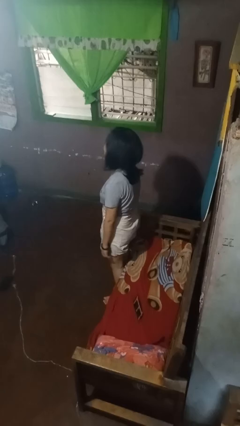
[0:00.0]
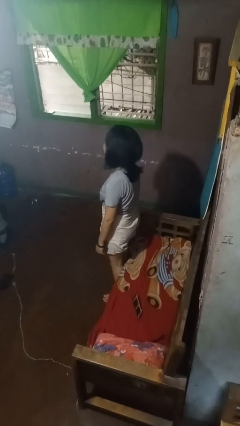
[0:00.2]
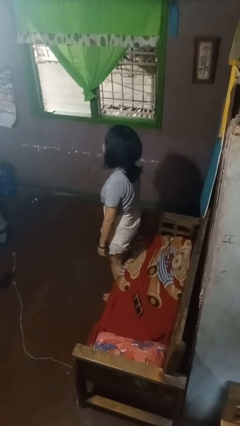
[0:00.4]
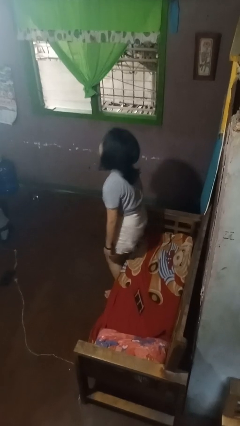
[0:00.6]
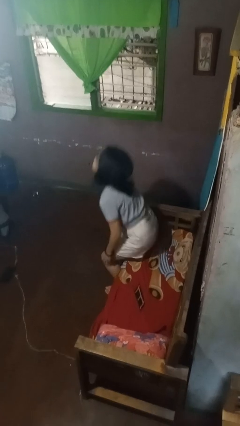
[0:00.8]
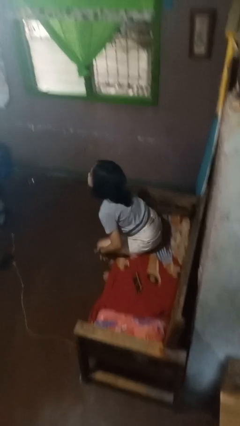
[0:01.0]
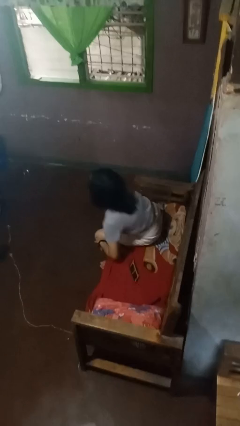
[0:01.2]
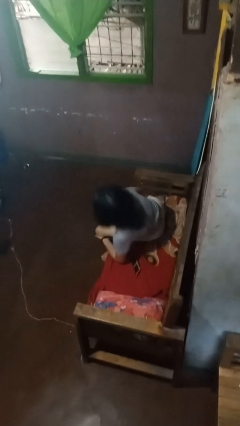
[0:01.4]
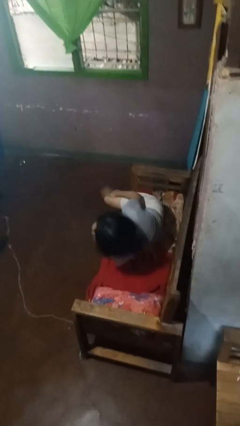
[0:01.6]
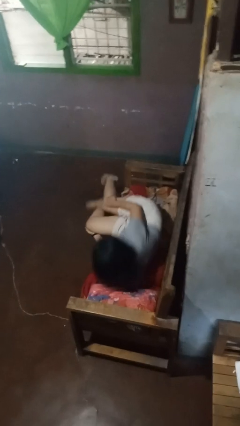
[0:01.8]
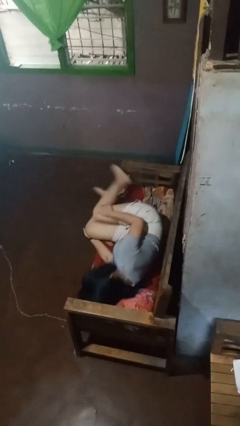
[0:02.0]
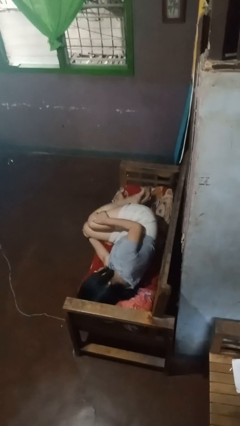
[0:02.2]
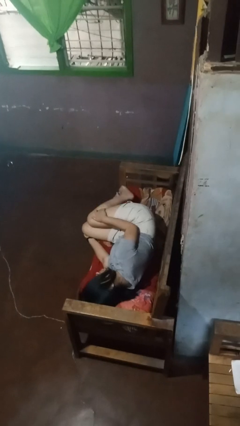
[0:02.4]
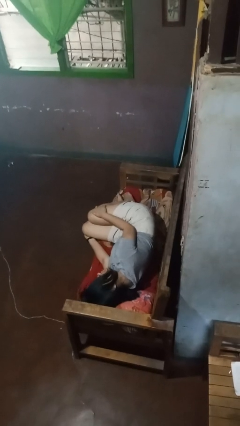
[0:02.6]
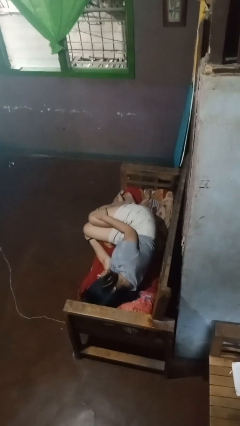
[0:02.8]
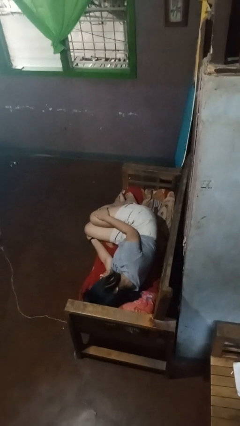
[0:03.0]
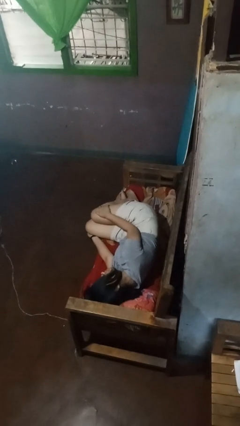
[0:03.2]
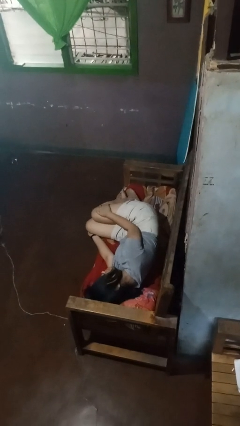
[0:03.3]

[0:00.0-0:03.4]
person lies down on bed

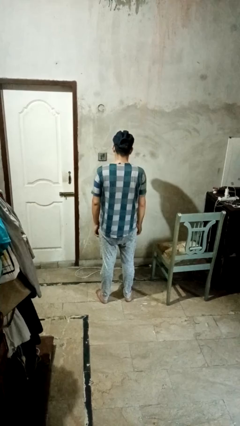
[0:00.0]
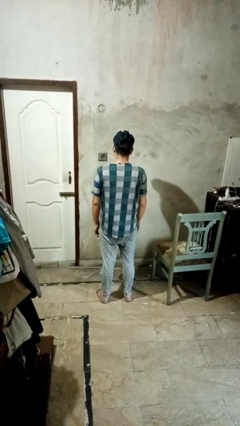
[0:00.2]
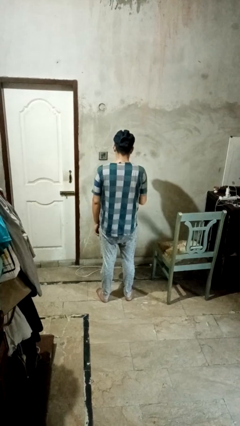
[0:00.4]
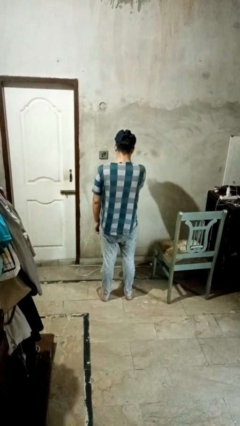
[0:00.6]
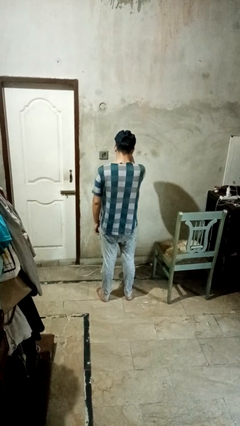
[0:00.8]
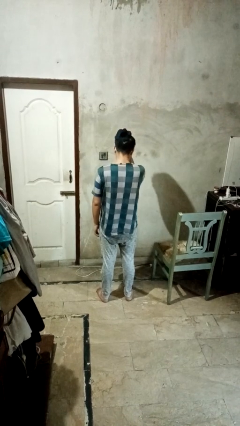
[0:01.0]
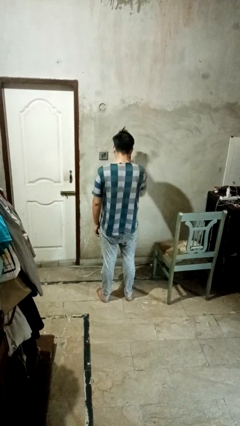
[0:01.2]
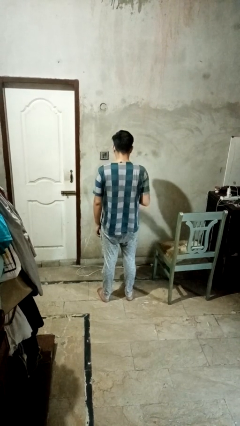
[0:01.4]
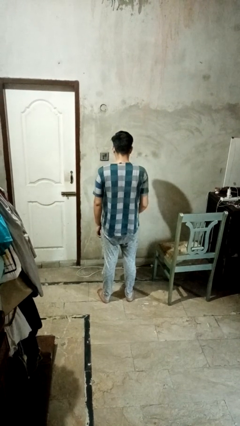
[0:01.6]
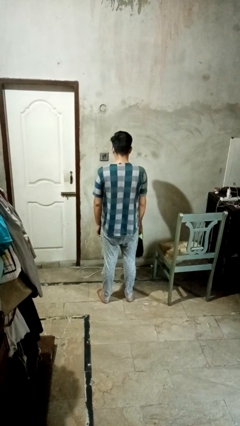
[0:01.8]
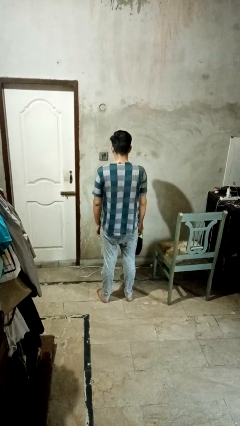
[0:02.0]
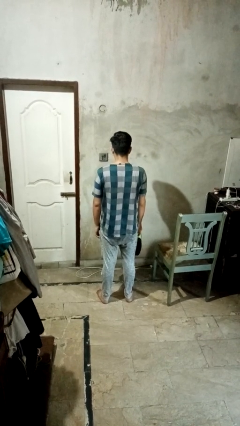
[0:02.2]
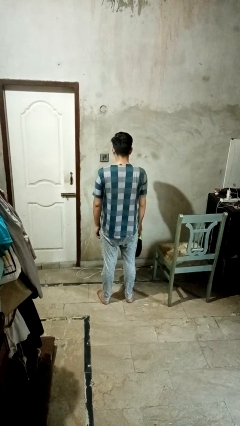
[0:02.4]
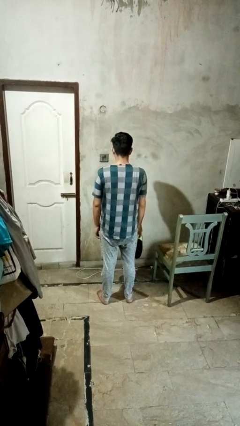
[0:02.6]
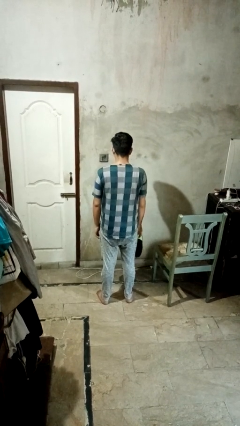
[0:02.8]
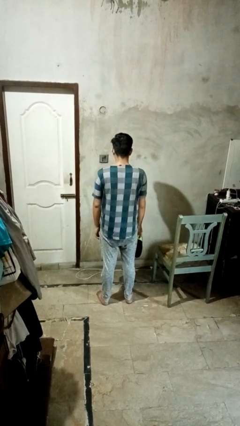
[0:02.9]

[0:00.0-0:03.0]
person takes off hat

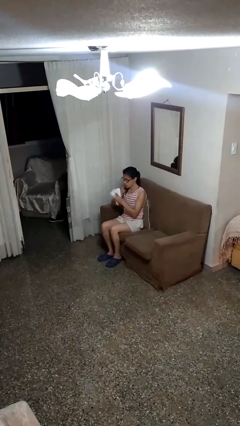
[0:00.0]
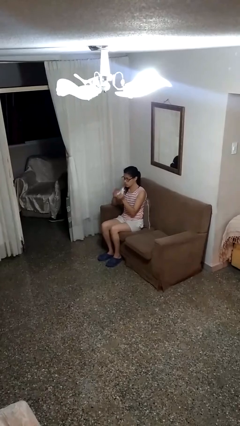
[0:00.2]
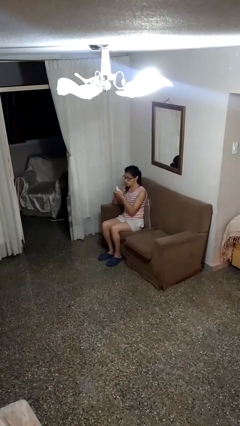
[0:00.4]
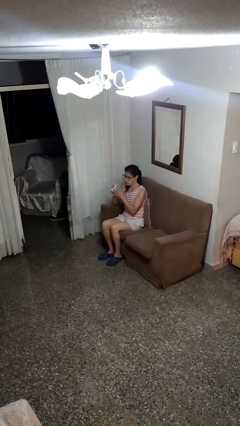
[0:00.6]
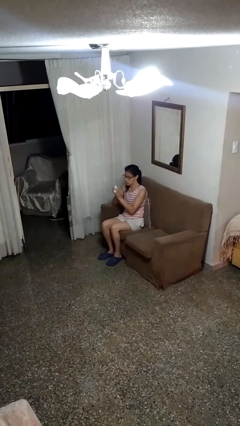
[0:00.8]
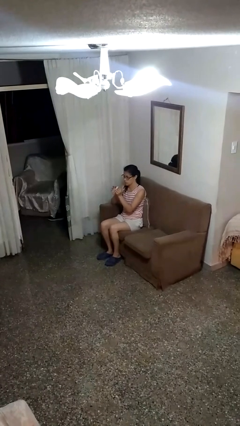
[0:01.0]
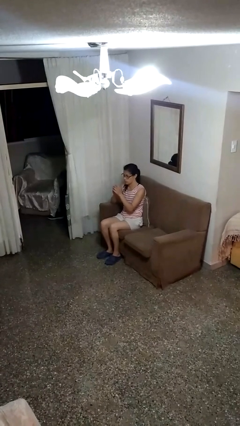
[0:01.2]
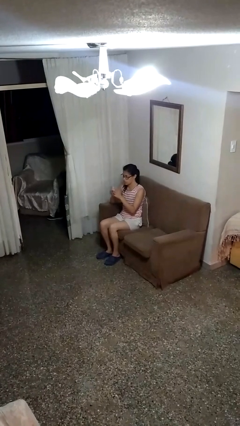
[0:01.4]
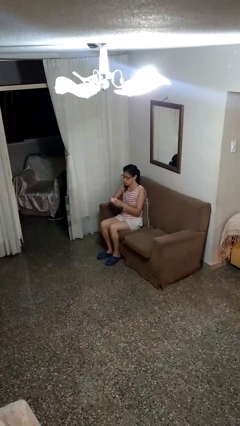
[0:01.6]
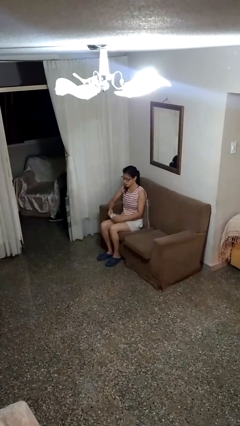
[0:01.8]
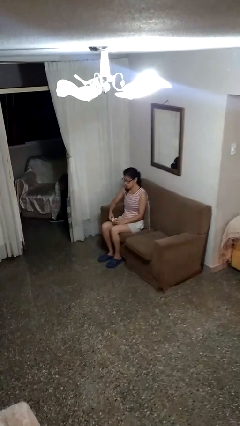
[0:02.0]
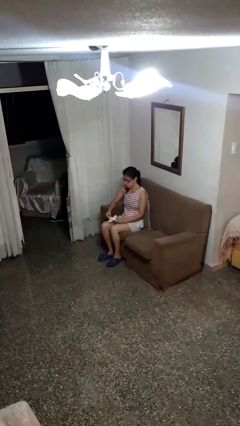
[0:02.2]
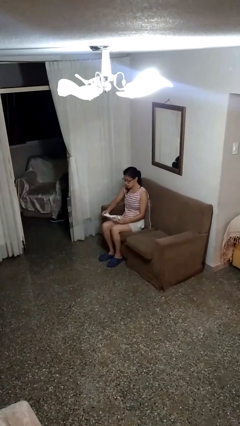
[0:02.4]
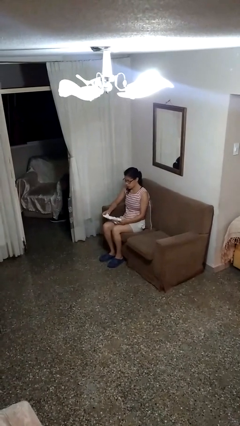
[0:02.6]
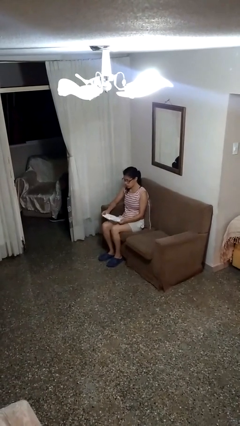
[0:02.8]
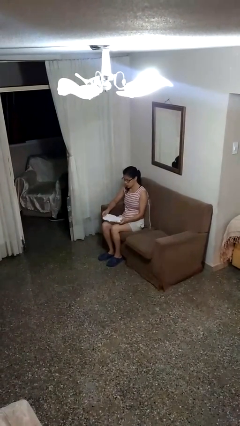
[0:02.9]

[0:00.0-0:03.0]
person crumples paper

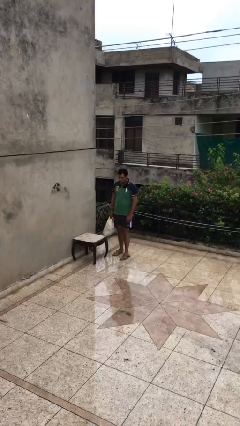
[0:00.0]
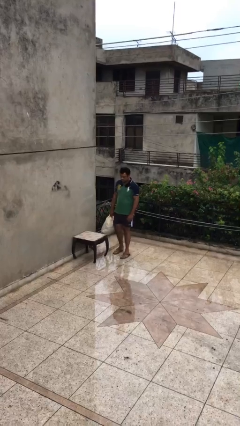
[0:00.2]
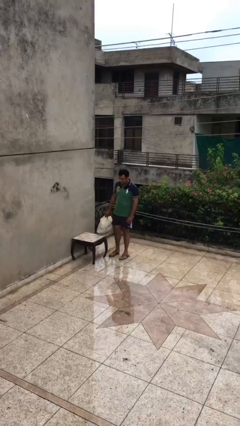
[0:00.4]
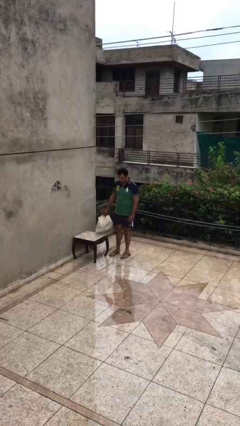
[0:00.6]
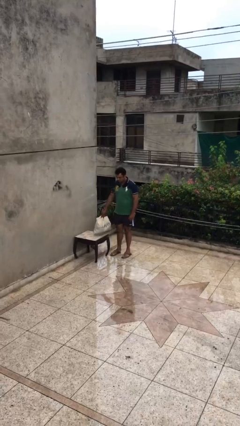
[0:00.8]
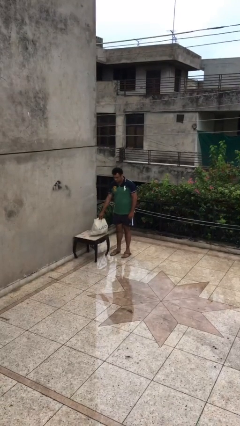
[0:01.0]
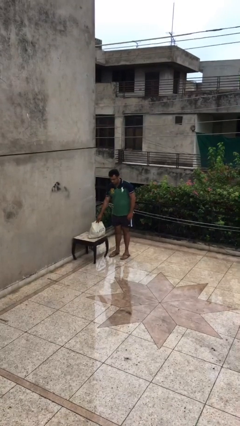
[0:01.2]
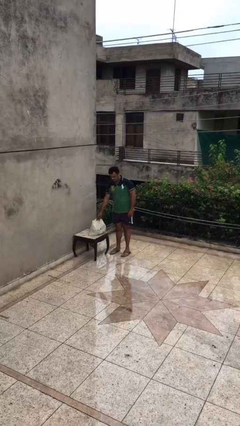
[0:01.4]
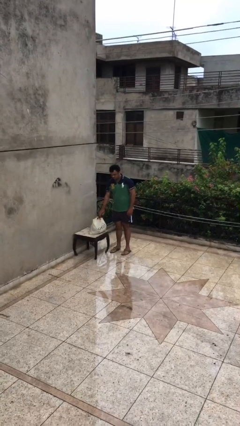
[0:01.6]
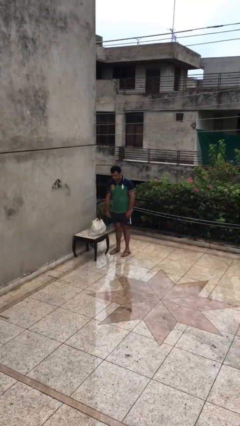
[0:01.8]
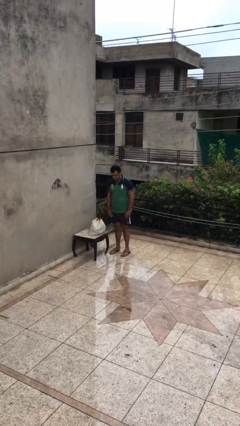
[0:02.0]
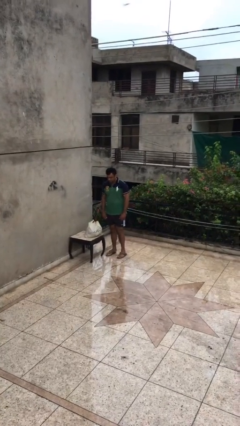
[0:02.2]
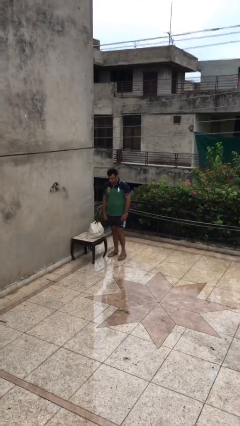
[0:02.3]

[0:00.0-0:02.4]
person puts down object on table

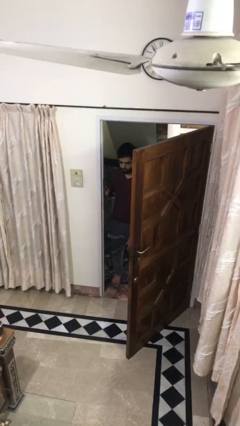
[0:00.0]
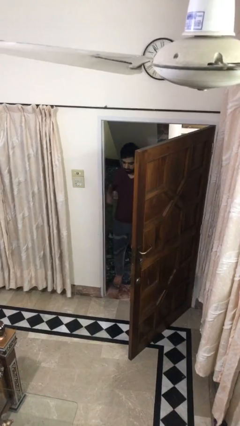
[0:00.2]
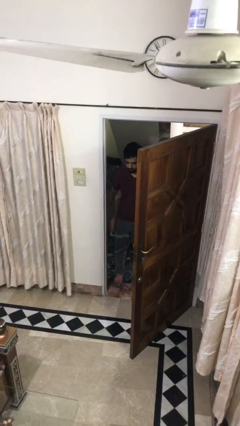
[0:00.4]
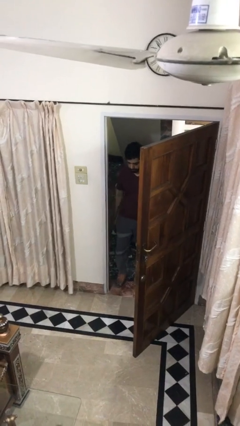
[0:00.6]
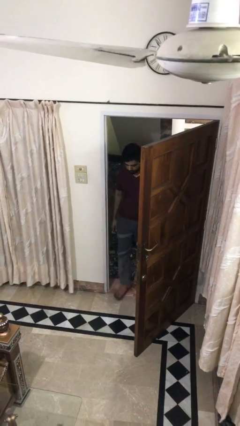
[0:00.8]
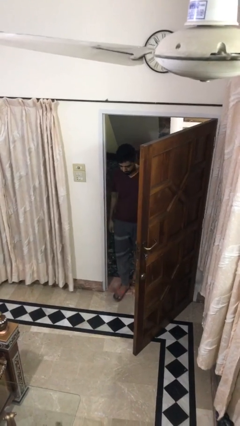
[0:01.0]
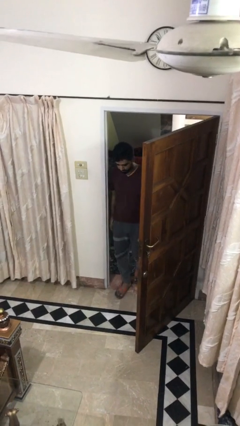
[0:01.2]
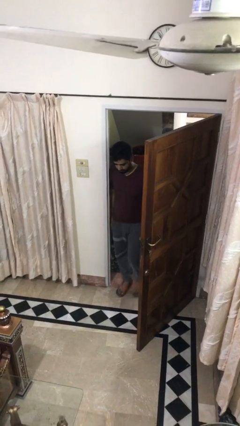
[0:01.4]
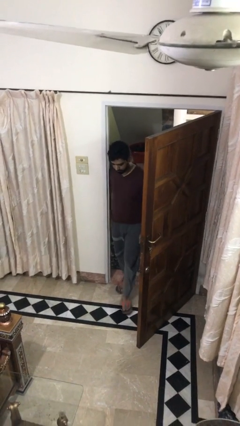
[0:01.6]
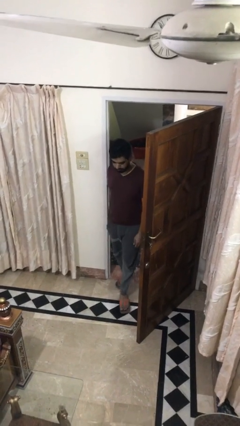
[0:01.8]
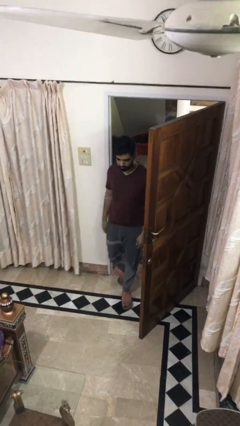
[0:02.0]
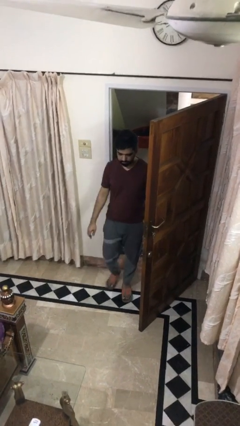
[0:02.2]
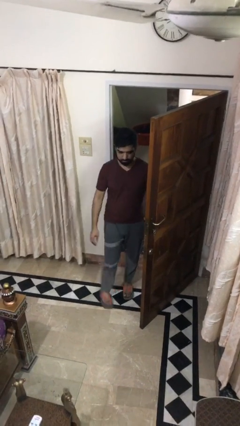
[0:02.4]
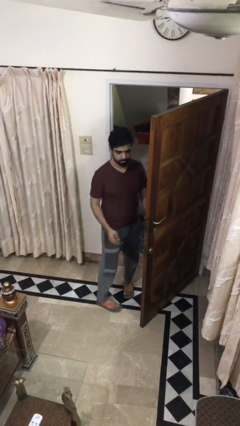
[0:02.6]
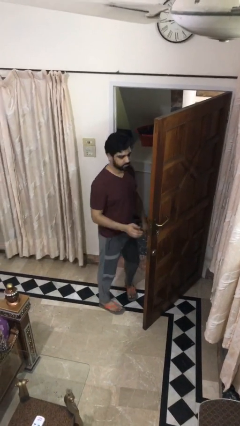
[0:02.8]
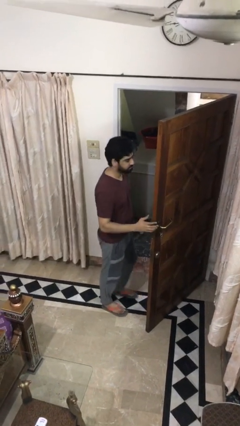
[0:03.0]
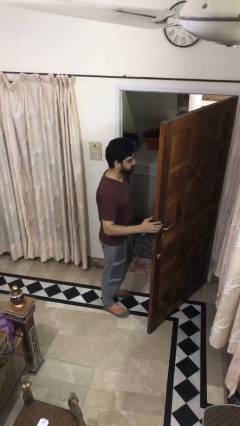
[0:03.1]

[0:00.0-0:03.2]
person enters scene through structure

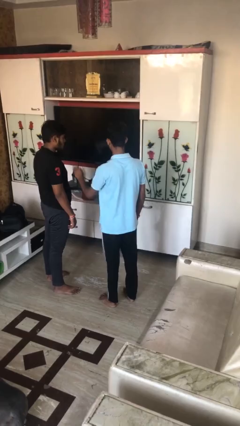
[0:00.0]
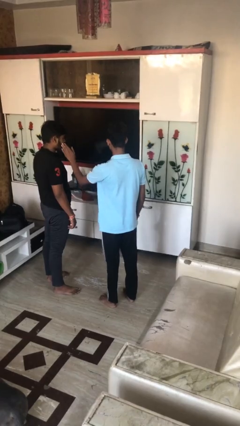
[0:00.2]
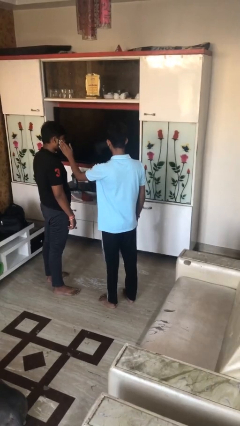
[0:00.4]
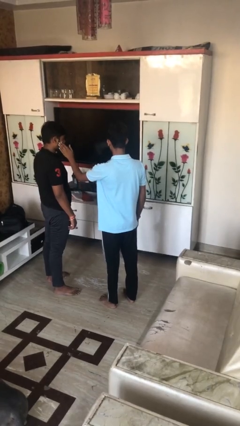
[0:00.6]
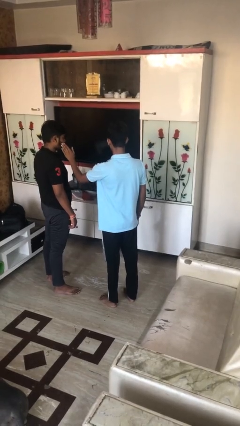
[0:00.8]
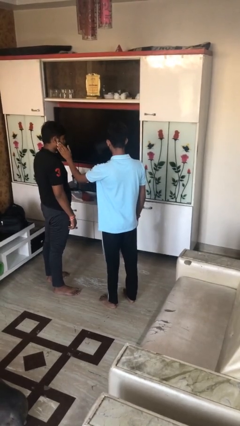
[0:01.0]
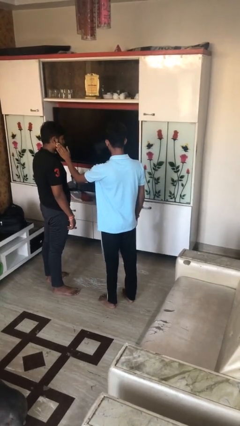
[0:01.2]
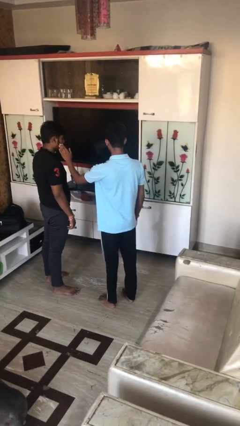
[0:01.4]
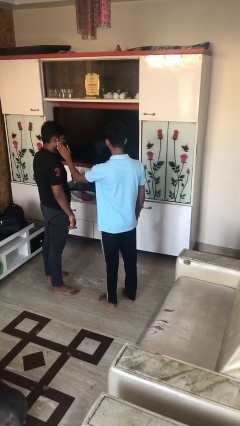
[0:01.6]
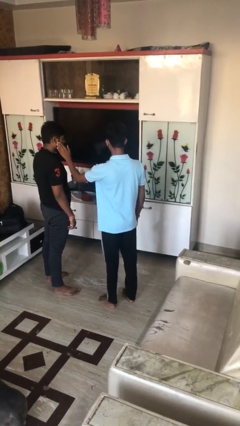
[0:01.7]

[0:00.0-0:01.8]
person touches face of person

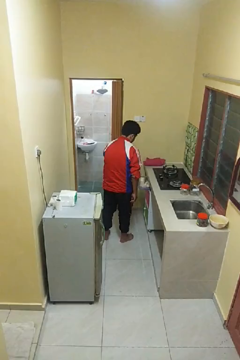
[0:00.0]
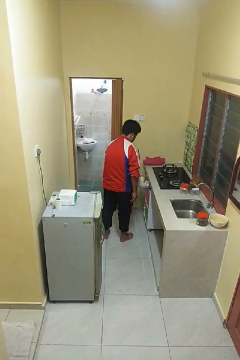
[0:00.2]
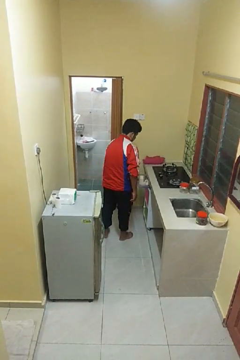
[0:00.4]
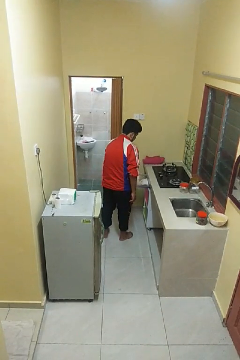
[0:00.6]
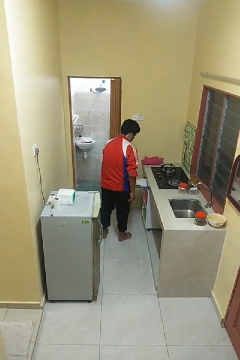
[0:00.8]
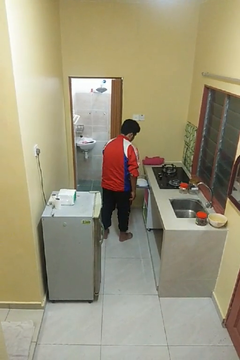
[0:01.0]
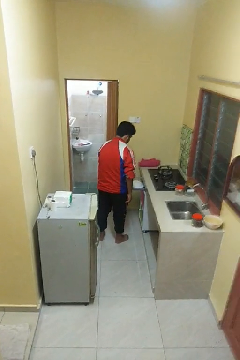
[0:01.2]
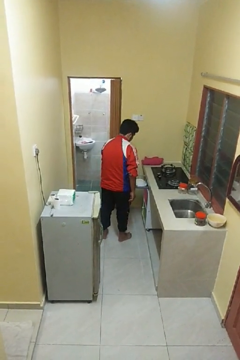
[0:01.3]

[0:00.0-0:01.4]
person opens kitchen drawer
